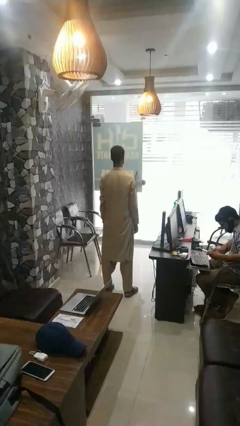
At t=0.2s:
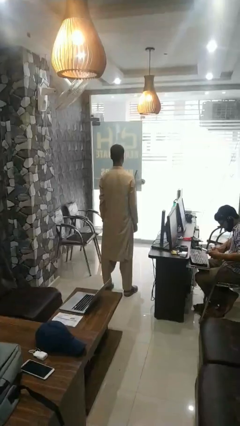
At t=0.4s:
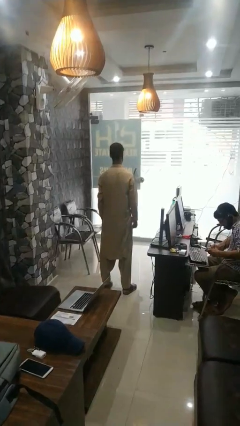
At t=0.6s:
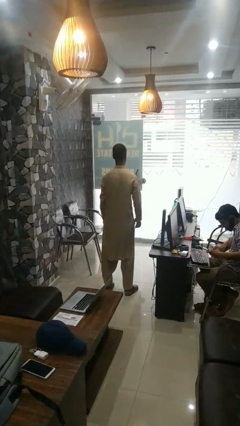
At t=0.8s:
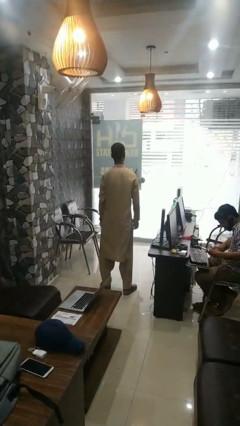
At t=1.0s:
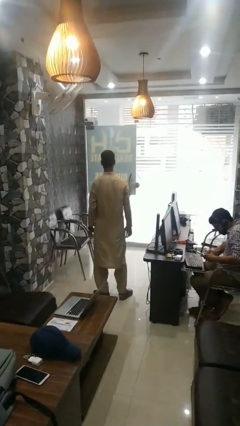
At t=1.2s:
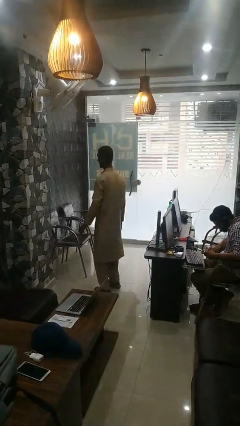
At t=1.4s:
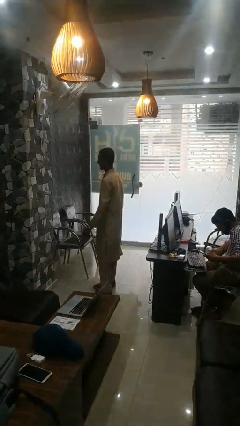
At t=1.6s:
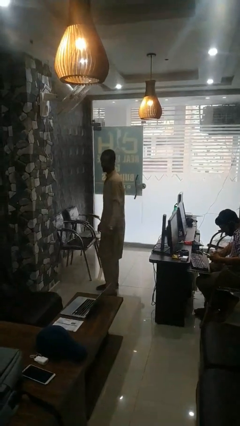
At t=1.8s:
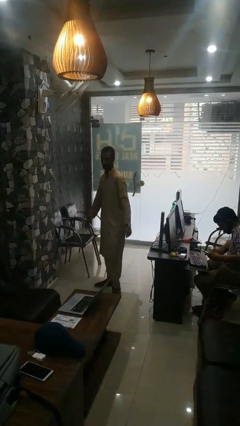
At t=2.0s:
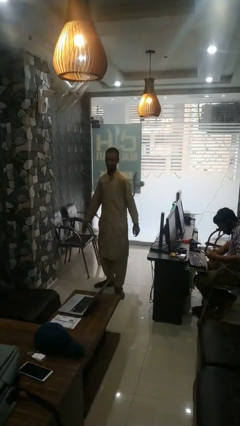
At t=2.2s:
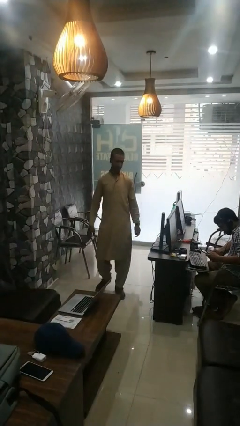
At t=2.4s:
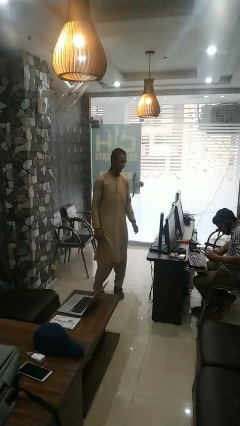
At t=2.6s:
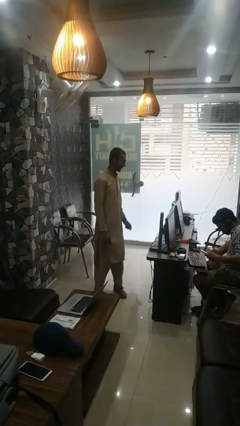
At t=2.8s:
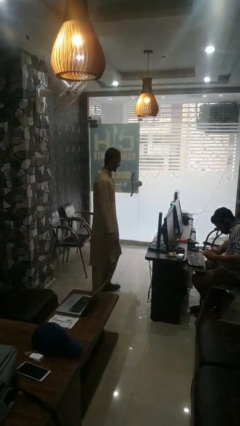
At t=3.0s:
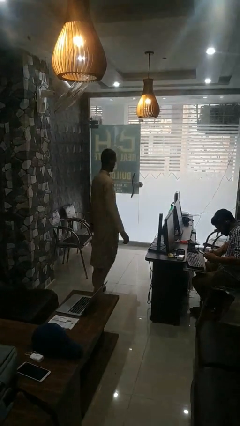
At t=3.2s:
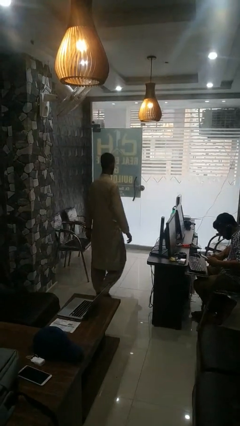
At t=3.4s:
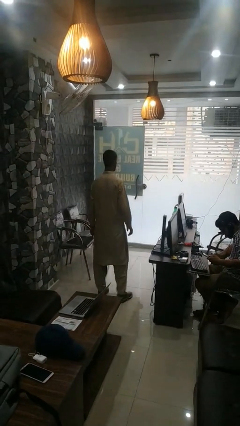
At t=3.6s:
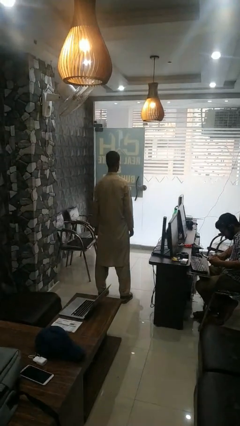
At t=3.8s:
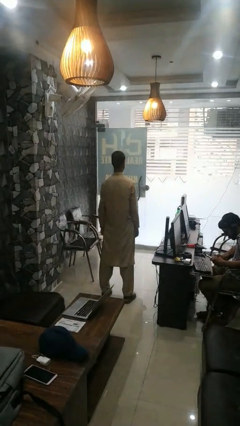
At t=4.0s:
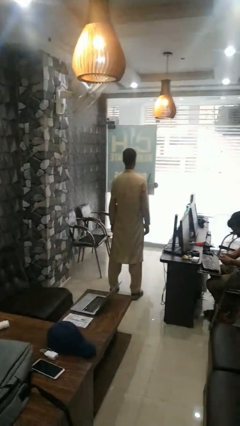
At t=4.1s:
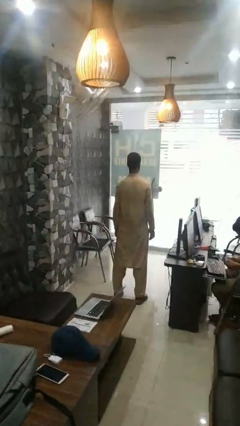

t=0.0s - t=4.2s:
person twirls

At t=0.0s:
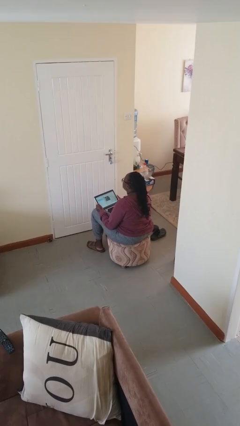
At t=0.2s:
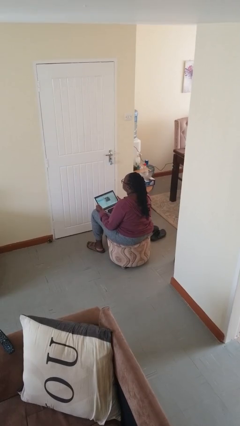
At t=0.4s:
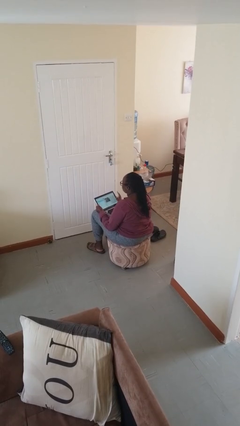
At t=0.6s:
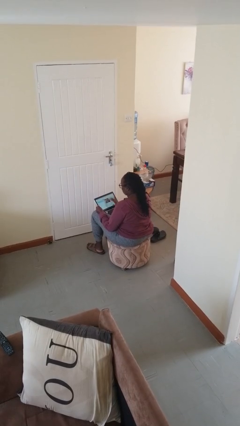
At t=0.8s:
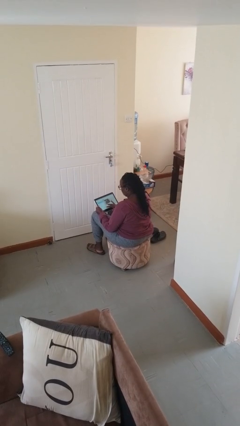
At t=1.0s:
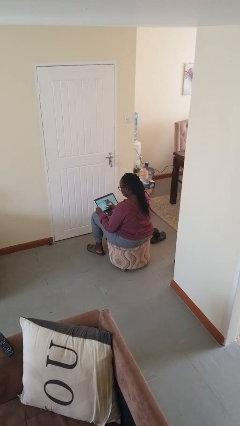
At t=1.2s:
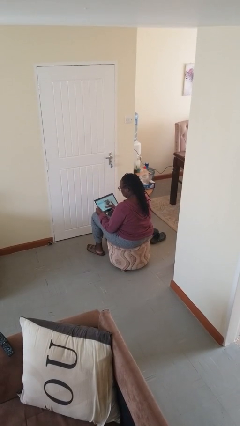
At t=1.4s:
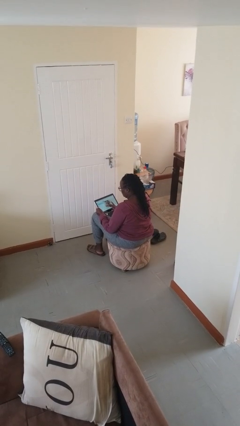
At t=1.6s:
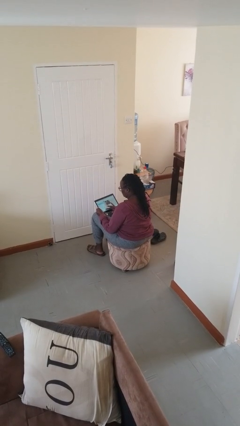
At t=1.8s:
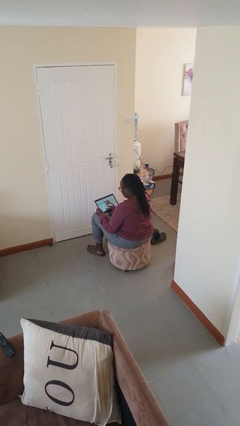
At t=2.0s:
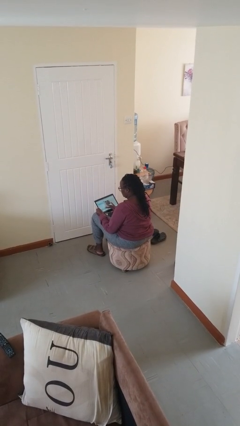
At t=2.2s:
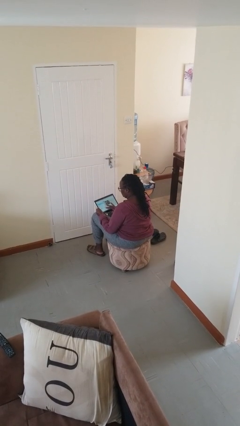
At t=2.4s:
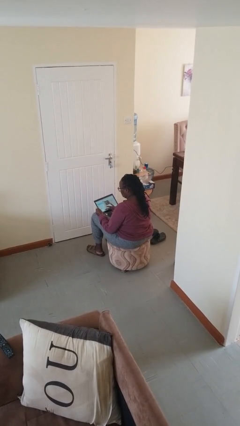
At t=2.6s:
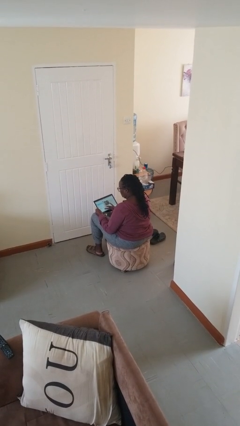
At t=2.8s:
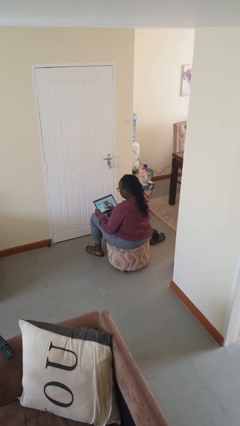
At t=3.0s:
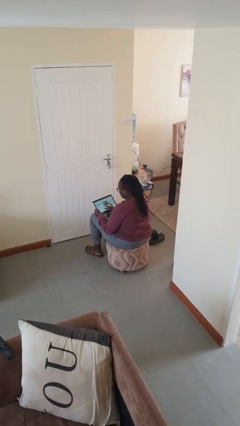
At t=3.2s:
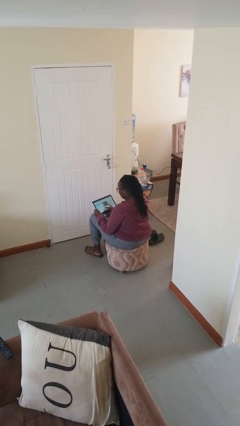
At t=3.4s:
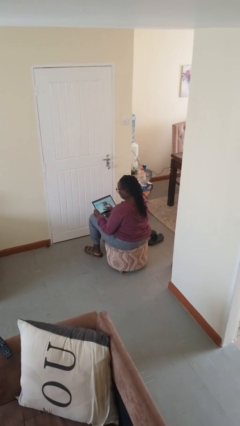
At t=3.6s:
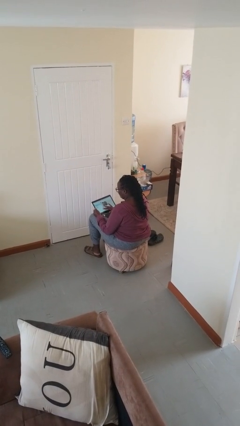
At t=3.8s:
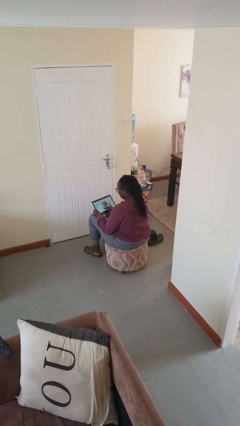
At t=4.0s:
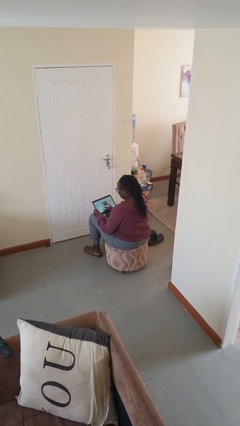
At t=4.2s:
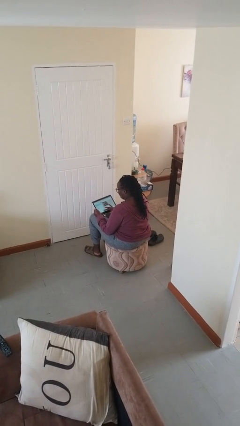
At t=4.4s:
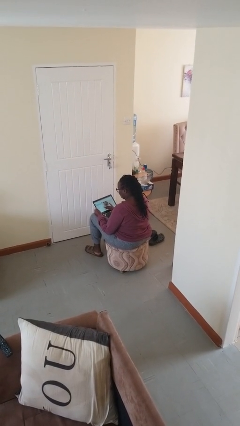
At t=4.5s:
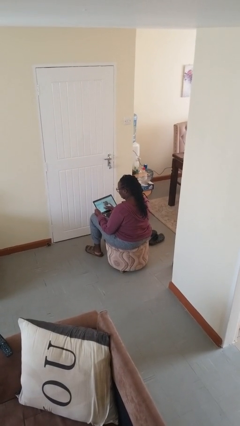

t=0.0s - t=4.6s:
person interacts with tablet

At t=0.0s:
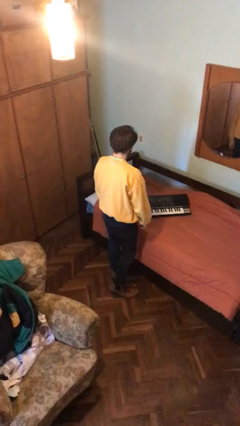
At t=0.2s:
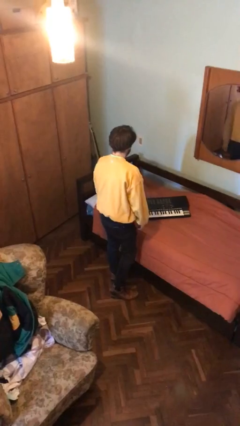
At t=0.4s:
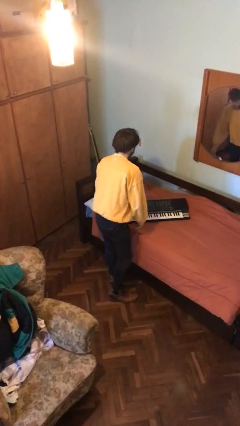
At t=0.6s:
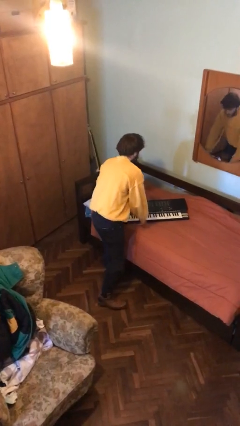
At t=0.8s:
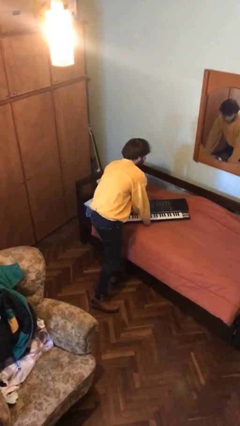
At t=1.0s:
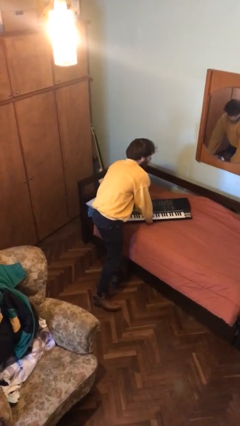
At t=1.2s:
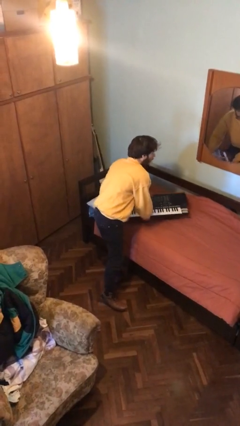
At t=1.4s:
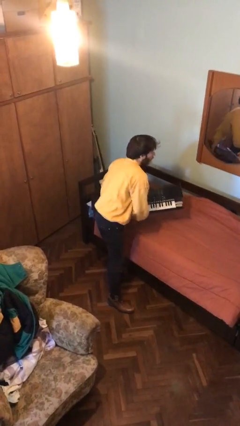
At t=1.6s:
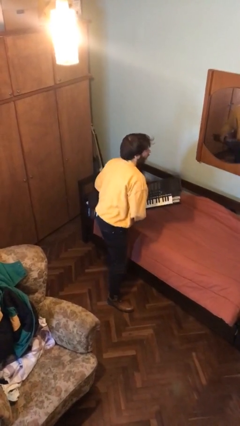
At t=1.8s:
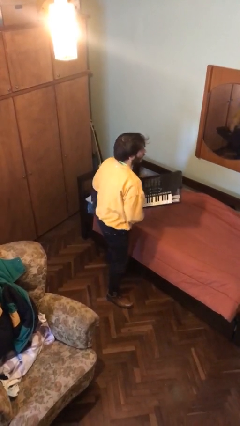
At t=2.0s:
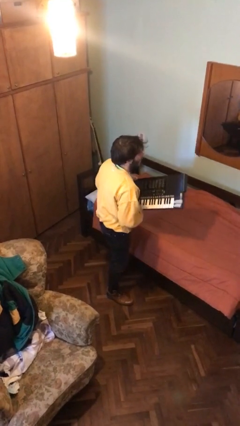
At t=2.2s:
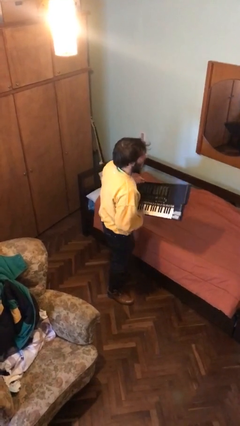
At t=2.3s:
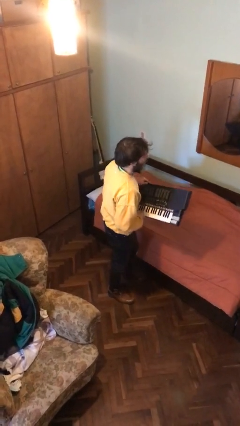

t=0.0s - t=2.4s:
person picks up object from bed

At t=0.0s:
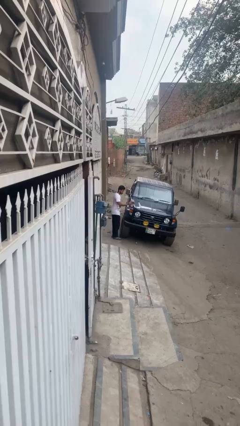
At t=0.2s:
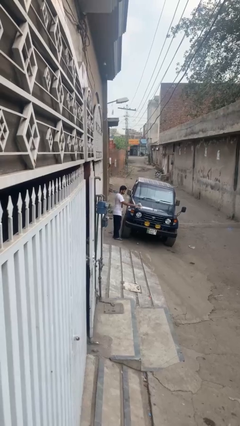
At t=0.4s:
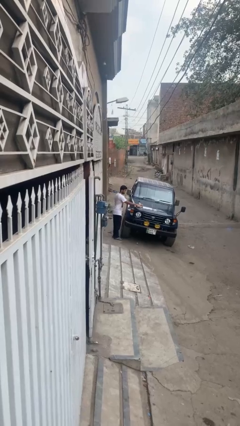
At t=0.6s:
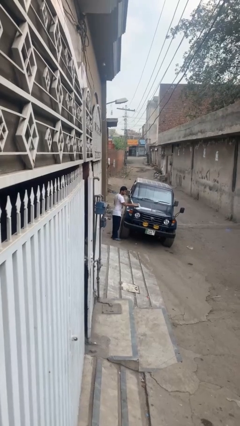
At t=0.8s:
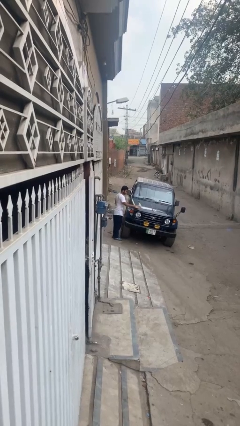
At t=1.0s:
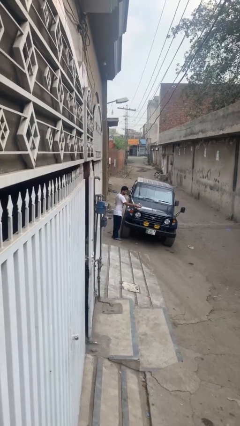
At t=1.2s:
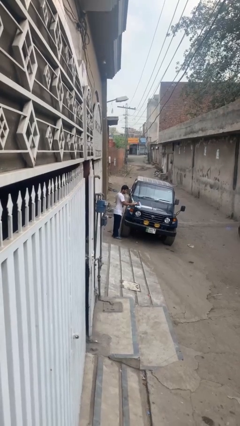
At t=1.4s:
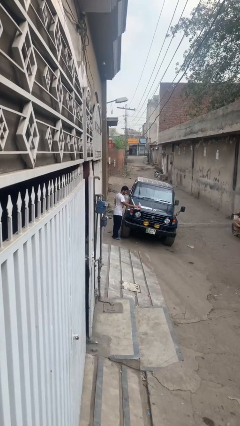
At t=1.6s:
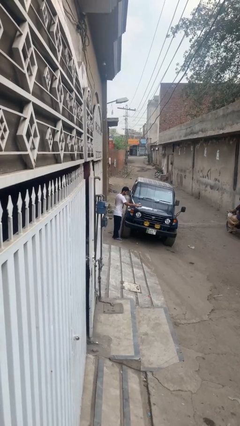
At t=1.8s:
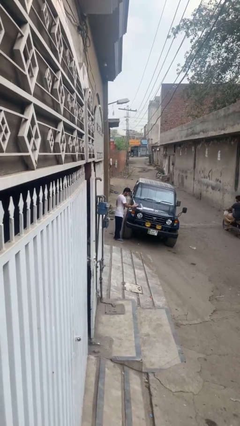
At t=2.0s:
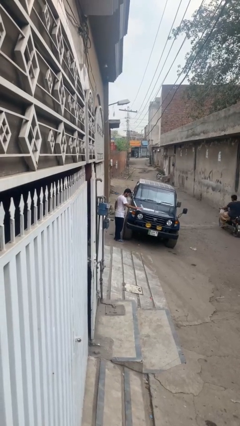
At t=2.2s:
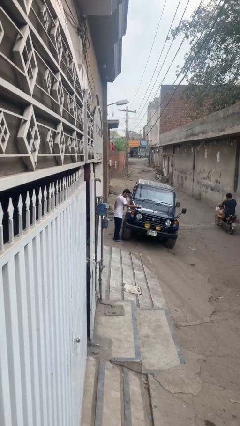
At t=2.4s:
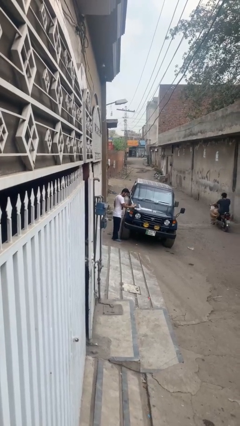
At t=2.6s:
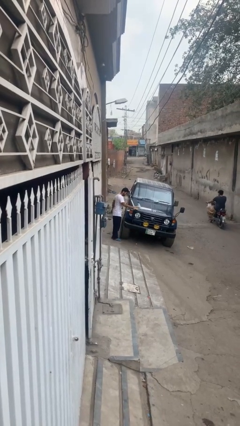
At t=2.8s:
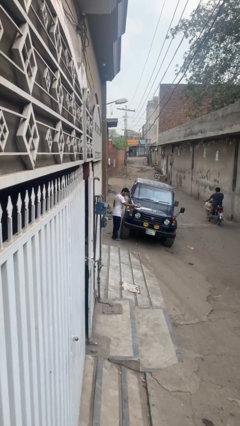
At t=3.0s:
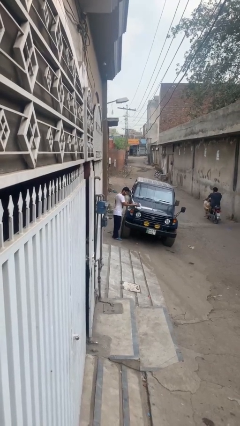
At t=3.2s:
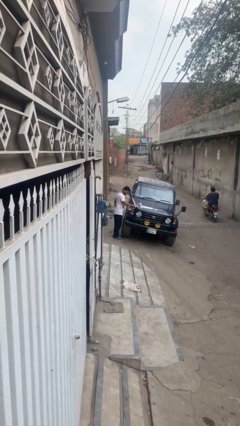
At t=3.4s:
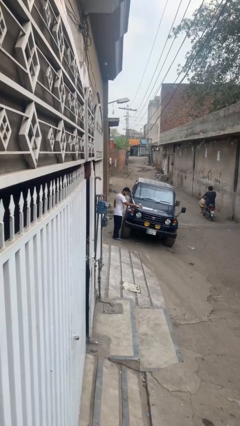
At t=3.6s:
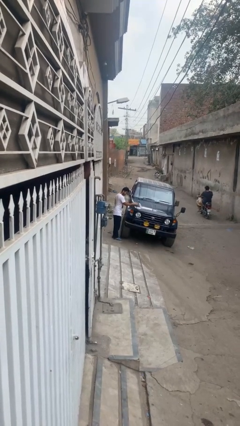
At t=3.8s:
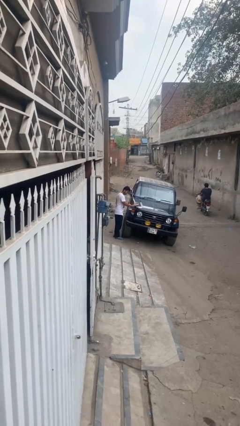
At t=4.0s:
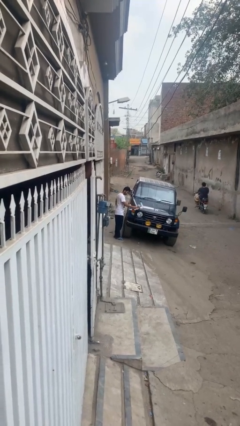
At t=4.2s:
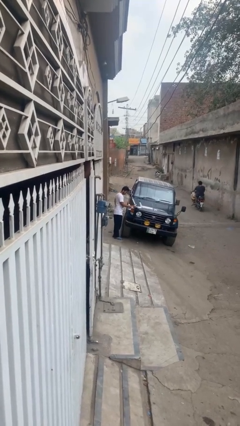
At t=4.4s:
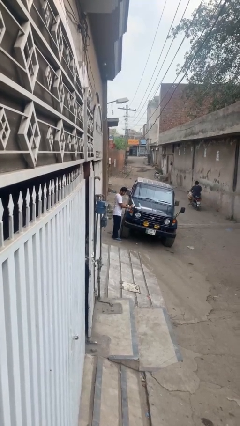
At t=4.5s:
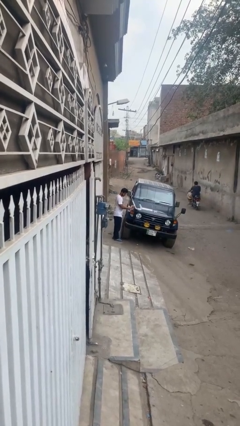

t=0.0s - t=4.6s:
person polishes car with rag

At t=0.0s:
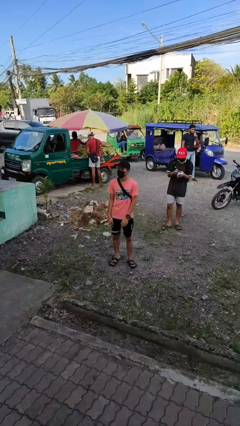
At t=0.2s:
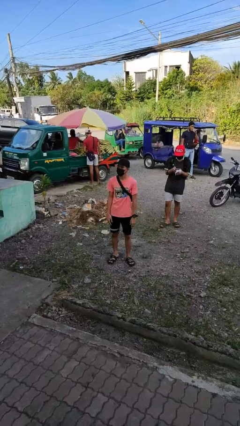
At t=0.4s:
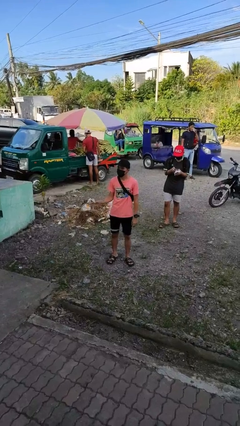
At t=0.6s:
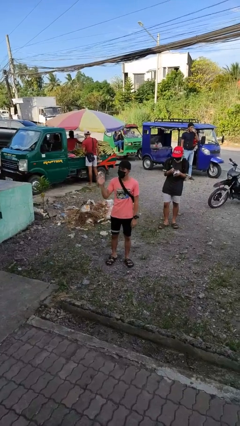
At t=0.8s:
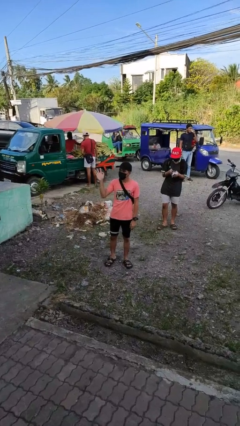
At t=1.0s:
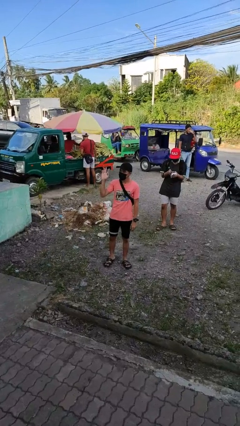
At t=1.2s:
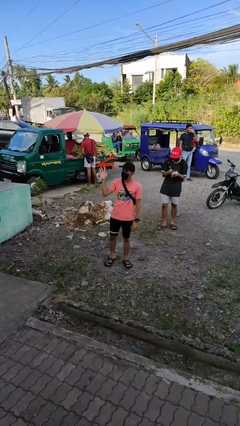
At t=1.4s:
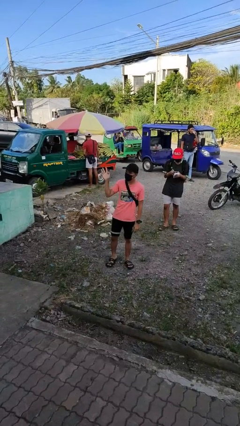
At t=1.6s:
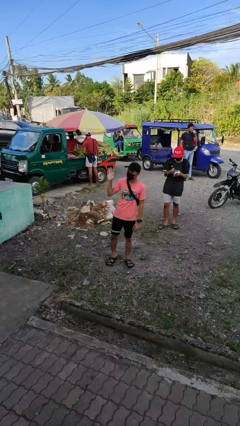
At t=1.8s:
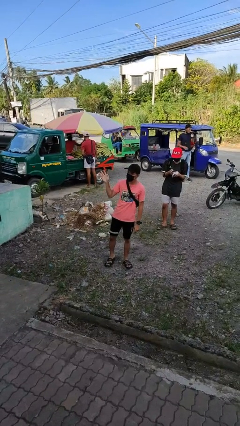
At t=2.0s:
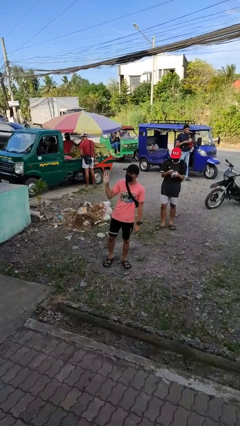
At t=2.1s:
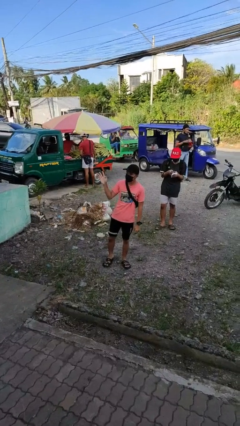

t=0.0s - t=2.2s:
person waves at person
